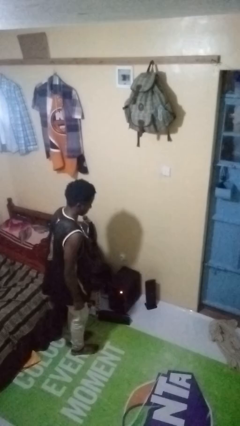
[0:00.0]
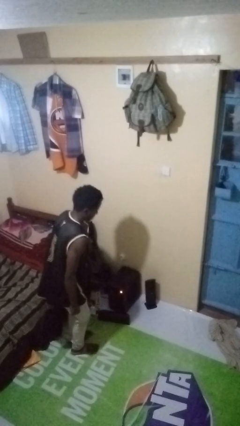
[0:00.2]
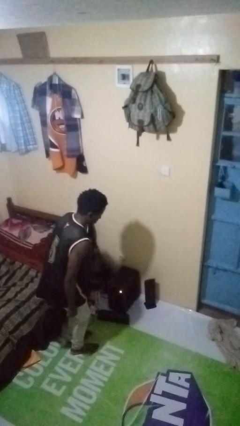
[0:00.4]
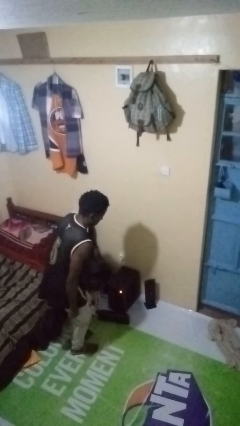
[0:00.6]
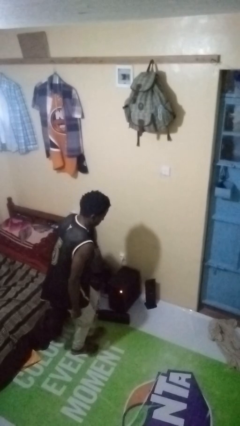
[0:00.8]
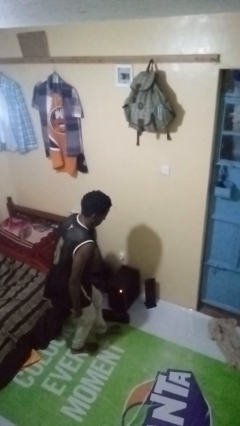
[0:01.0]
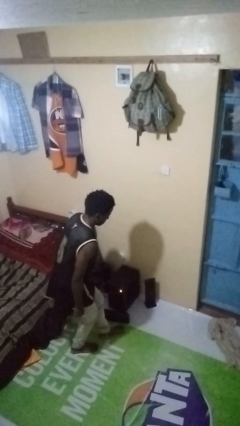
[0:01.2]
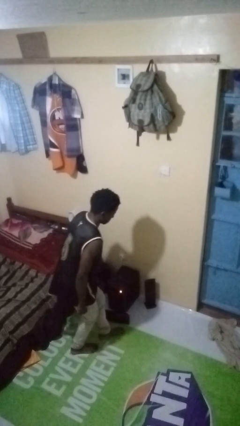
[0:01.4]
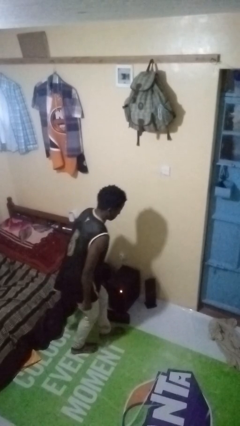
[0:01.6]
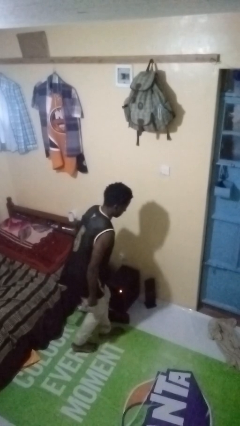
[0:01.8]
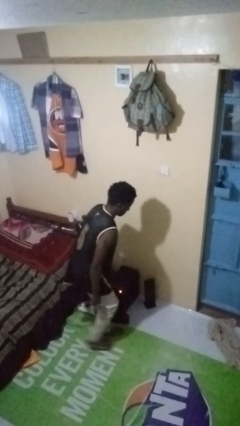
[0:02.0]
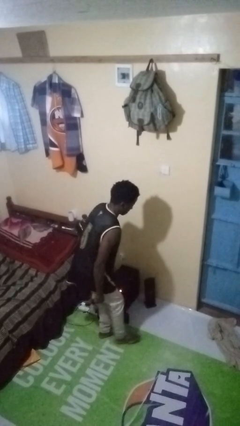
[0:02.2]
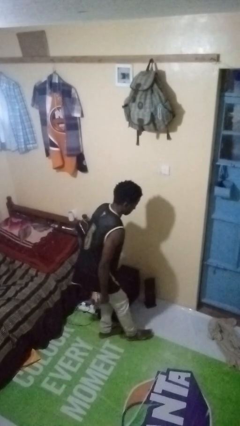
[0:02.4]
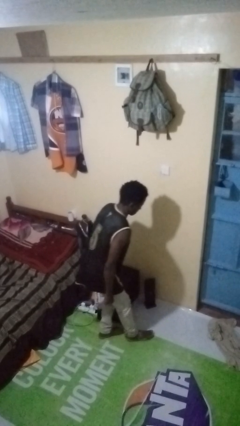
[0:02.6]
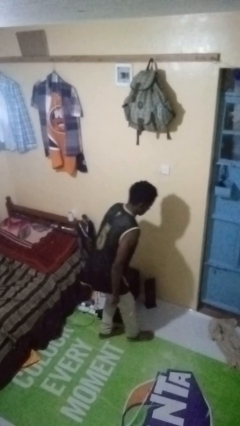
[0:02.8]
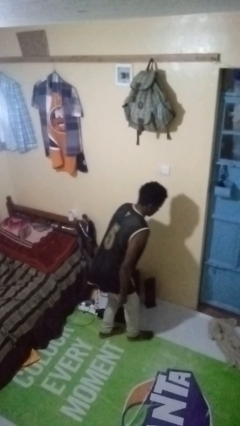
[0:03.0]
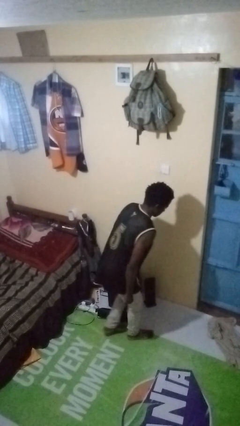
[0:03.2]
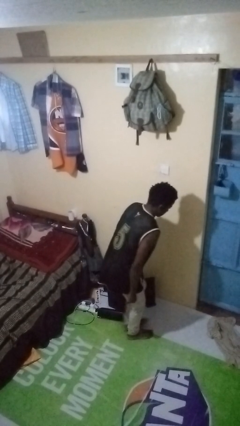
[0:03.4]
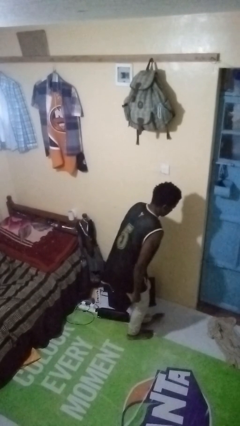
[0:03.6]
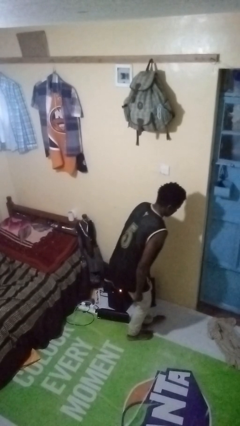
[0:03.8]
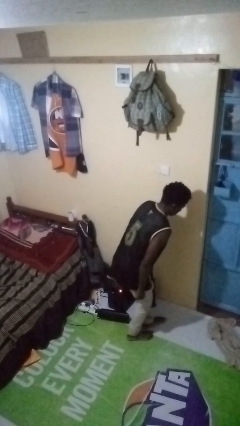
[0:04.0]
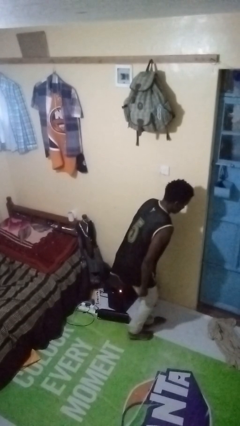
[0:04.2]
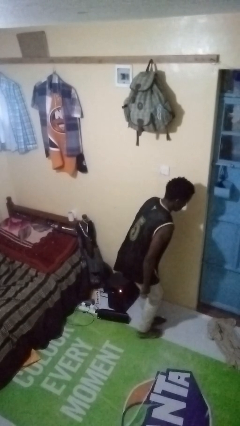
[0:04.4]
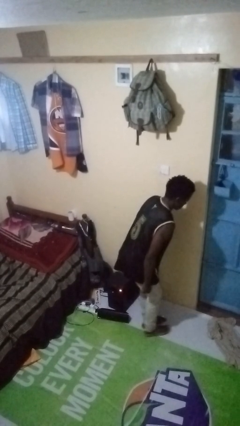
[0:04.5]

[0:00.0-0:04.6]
person walks tiptoe

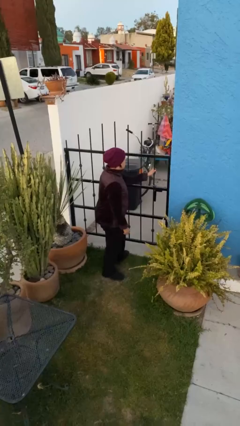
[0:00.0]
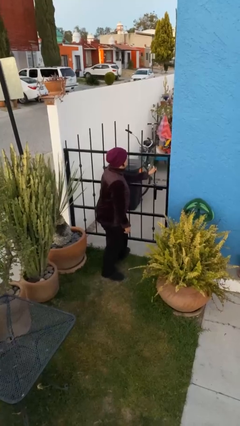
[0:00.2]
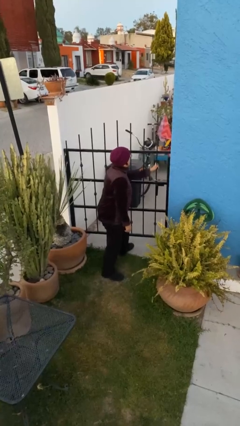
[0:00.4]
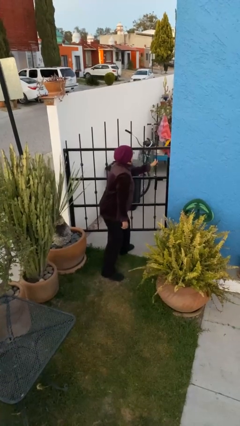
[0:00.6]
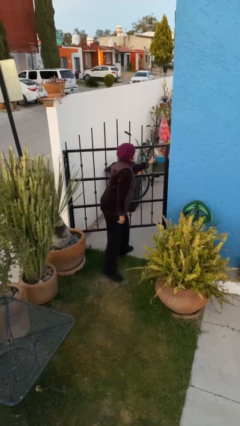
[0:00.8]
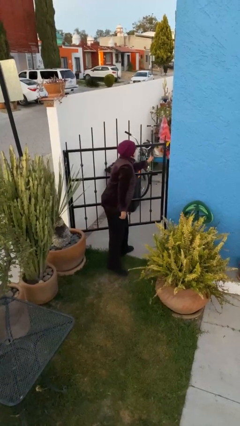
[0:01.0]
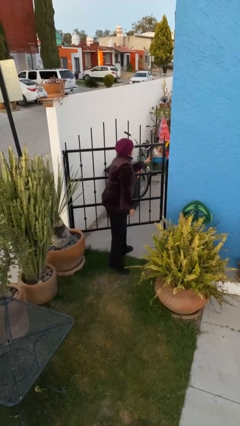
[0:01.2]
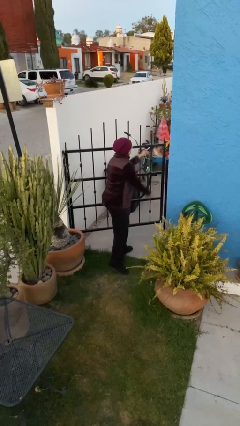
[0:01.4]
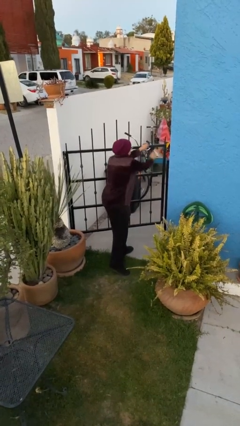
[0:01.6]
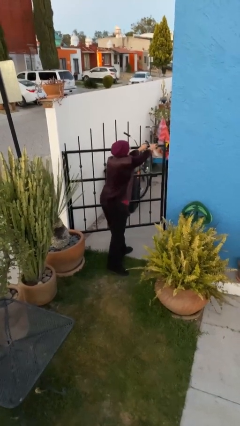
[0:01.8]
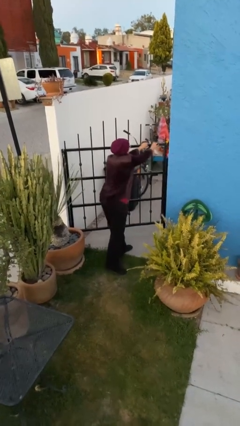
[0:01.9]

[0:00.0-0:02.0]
person opens facility door

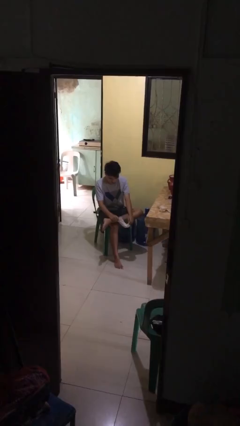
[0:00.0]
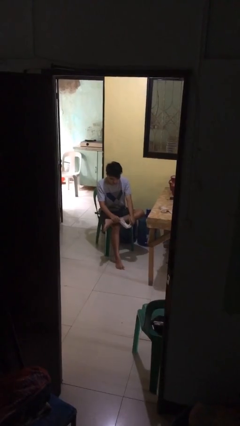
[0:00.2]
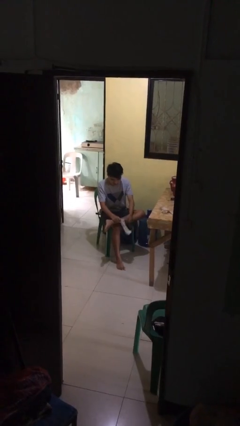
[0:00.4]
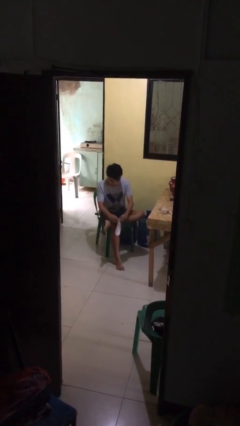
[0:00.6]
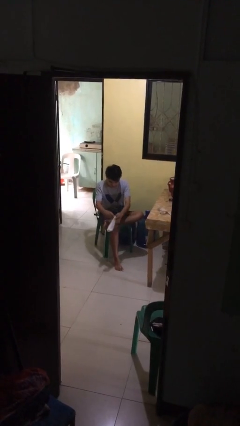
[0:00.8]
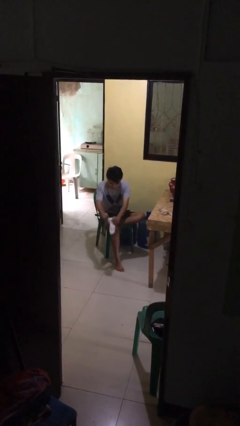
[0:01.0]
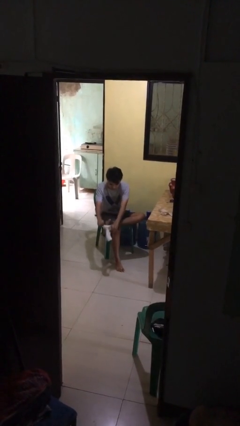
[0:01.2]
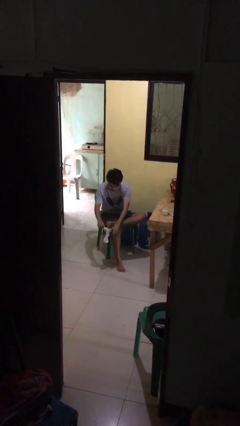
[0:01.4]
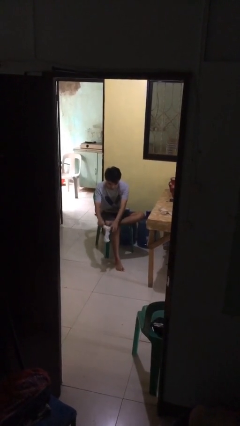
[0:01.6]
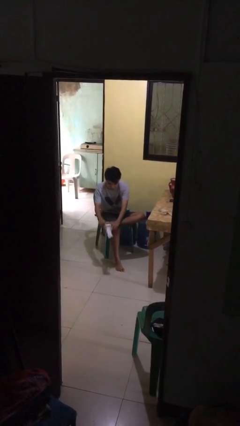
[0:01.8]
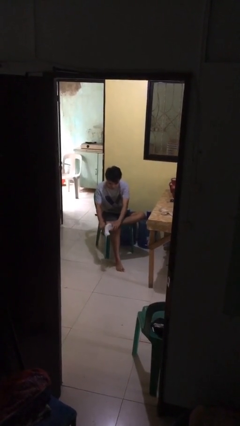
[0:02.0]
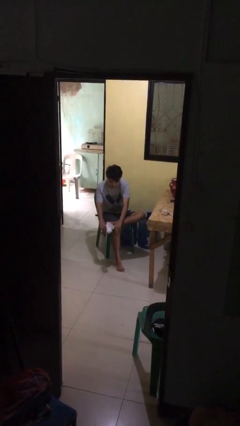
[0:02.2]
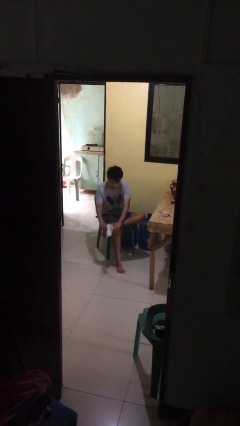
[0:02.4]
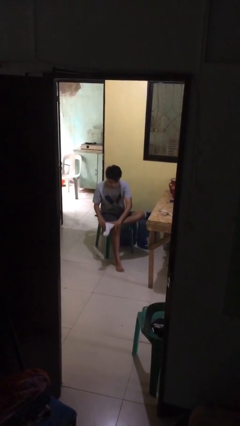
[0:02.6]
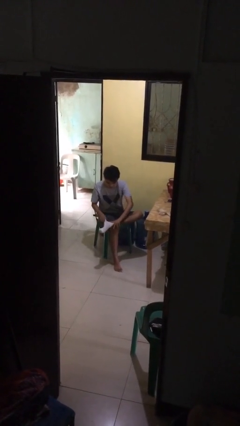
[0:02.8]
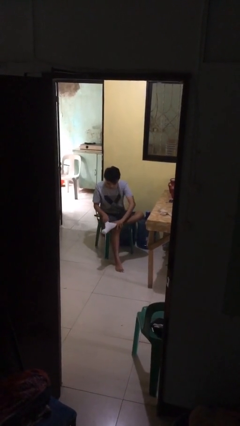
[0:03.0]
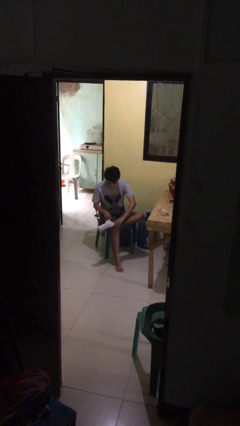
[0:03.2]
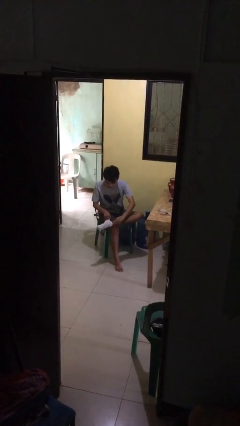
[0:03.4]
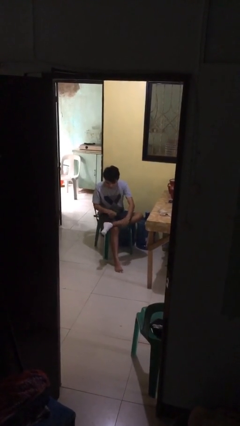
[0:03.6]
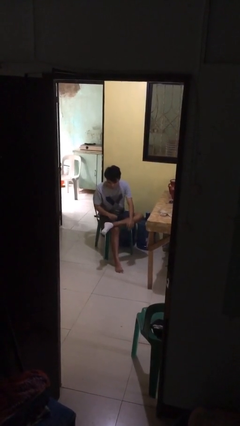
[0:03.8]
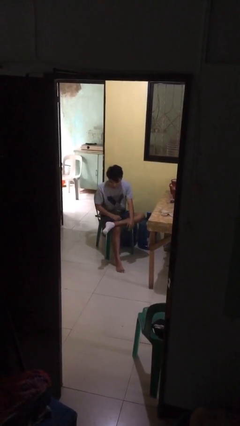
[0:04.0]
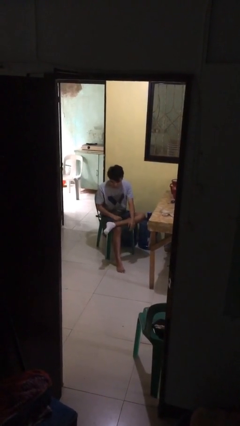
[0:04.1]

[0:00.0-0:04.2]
person puts on socks

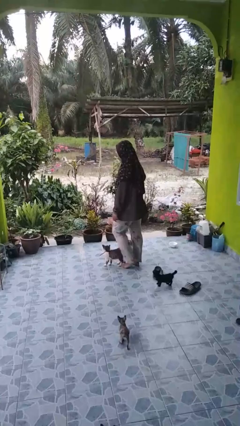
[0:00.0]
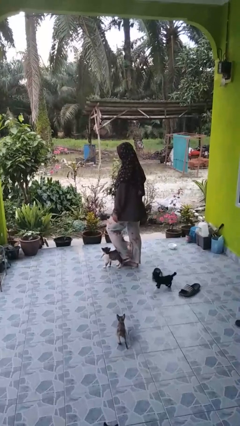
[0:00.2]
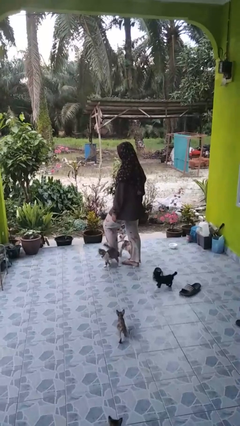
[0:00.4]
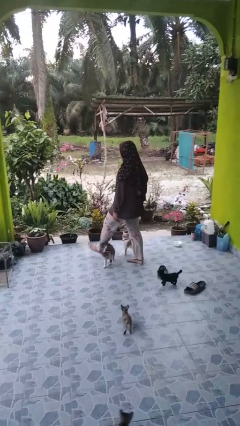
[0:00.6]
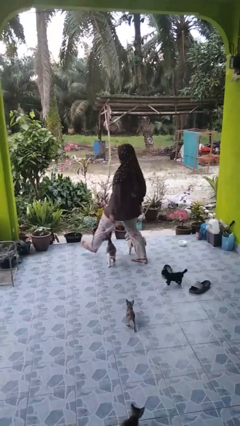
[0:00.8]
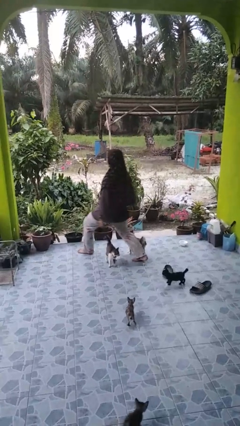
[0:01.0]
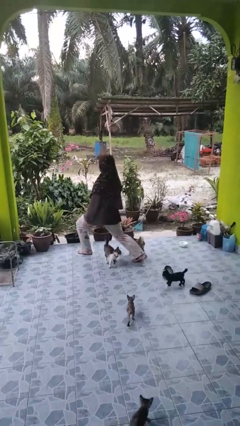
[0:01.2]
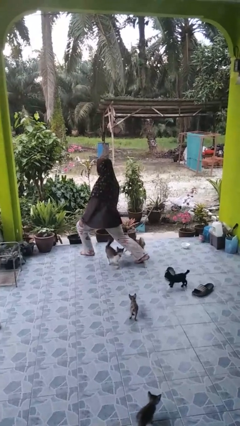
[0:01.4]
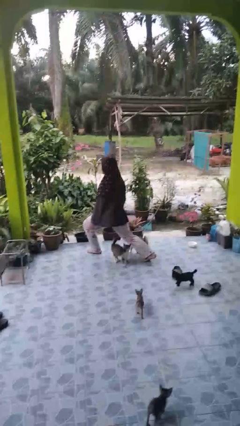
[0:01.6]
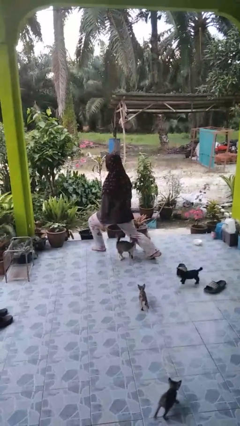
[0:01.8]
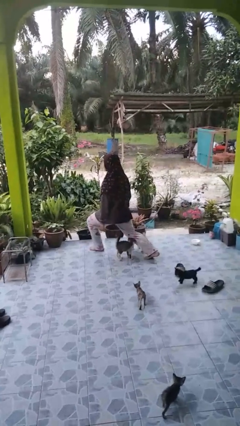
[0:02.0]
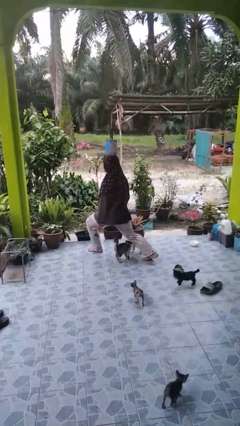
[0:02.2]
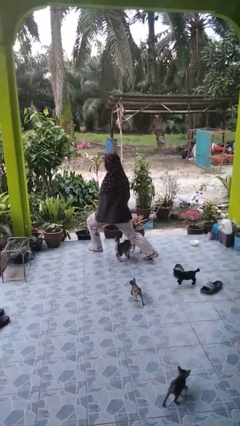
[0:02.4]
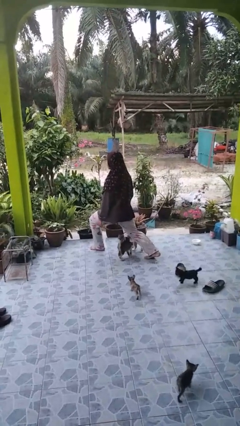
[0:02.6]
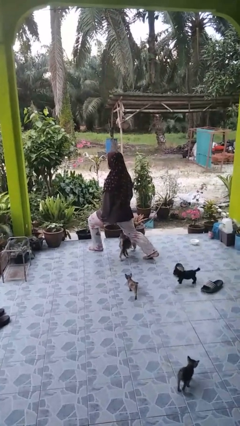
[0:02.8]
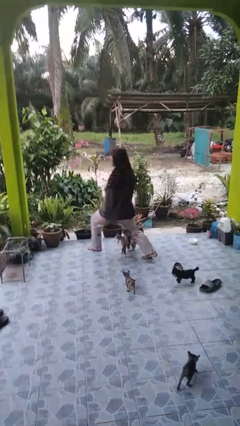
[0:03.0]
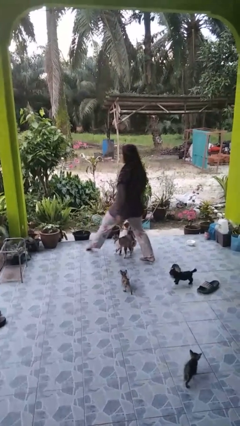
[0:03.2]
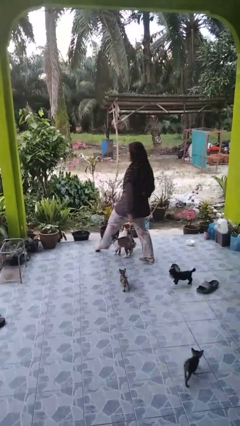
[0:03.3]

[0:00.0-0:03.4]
person exercises with lunges

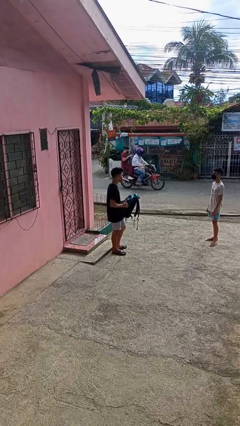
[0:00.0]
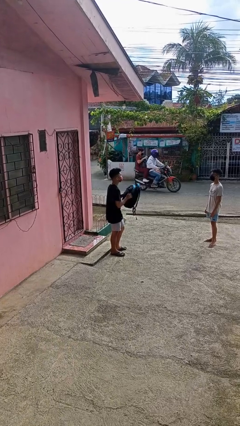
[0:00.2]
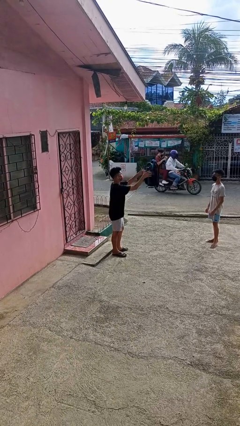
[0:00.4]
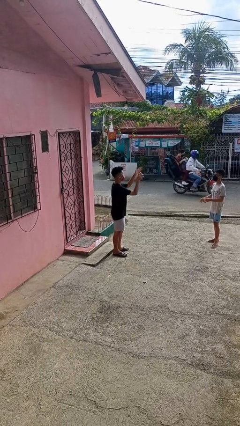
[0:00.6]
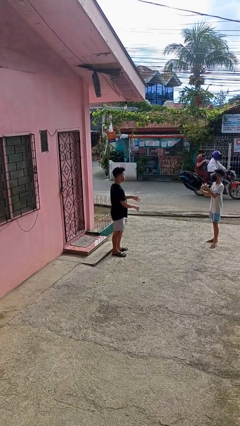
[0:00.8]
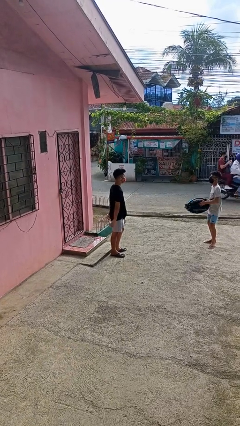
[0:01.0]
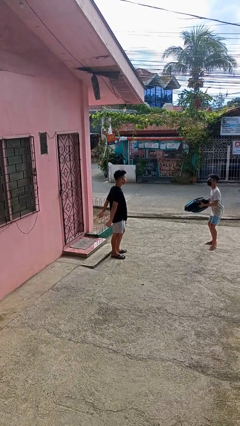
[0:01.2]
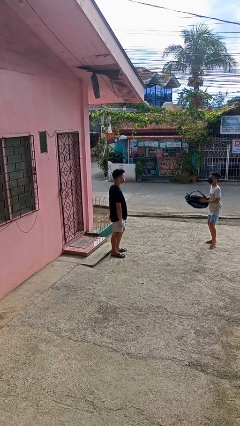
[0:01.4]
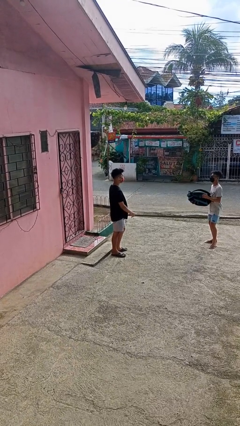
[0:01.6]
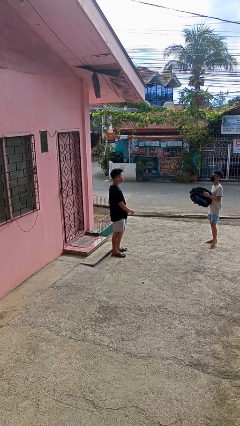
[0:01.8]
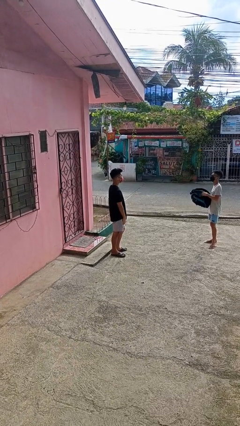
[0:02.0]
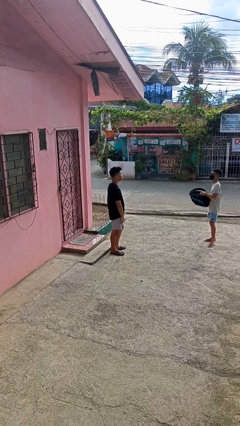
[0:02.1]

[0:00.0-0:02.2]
person throws object to person

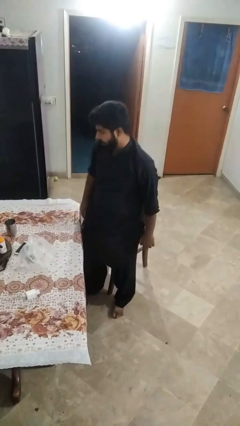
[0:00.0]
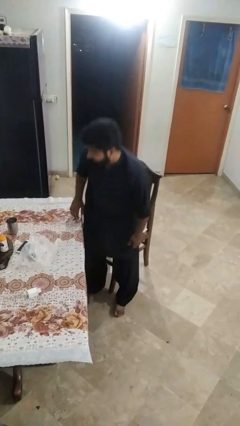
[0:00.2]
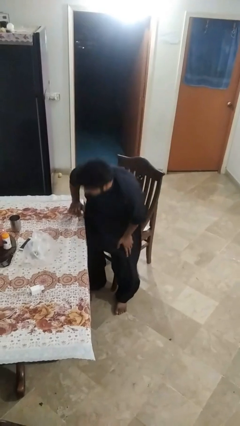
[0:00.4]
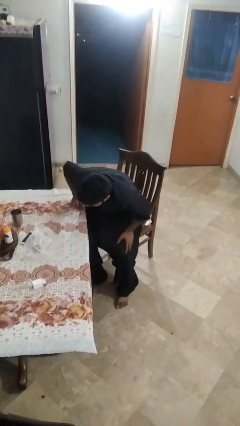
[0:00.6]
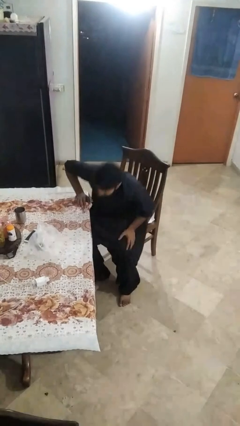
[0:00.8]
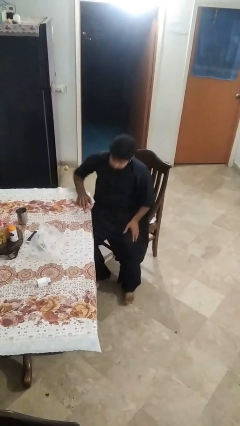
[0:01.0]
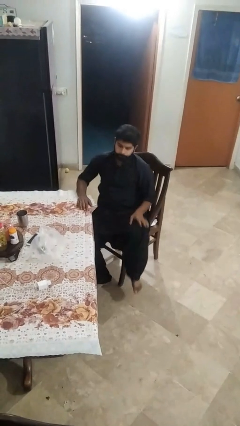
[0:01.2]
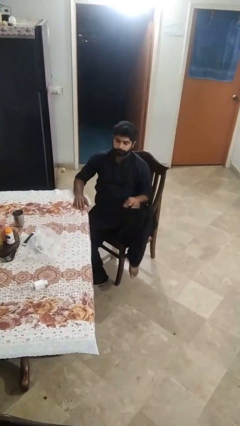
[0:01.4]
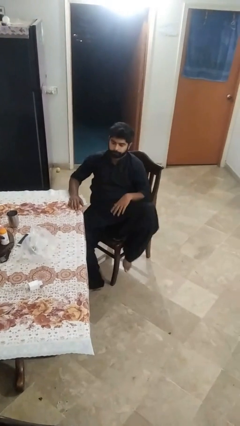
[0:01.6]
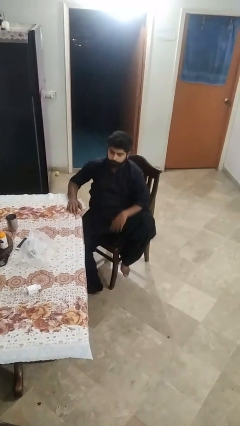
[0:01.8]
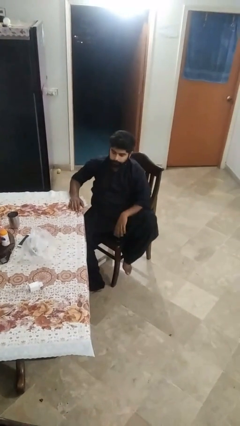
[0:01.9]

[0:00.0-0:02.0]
person sits down
